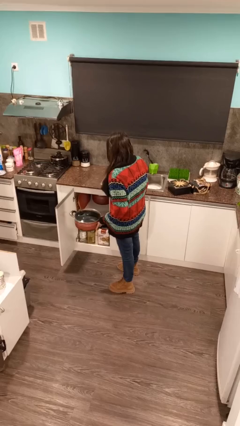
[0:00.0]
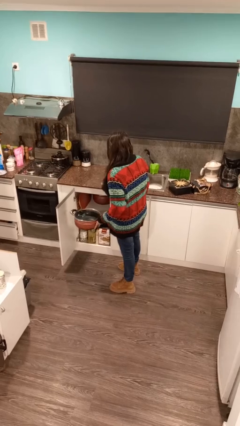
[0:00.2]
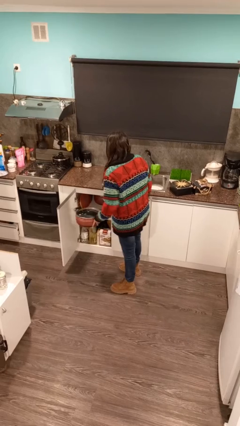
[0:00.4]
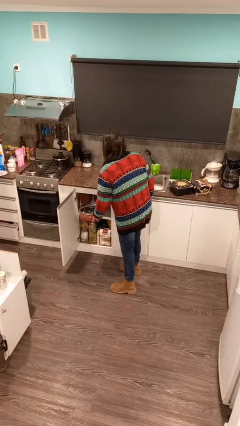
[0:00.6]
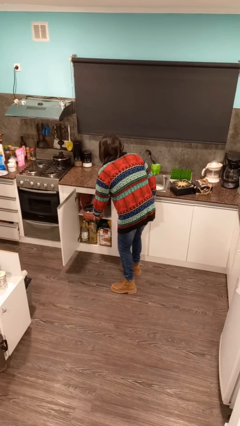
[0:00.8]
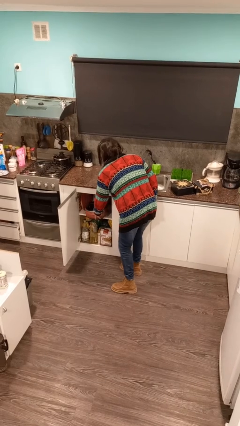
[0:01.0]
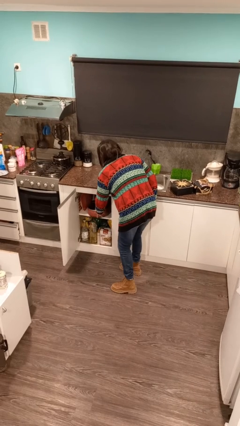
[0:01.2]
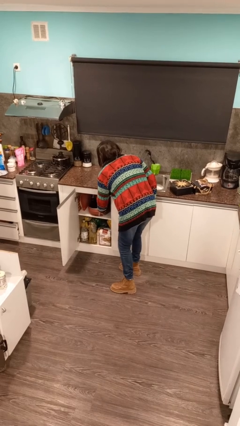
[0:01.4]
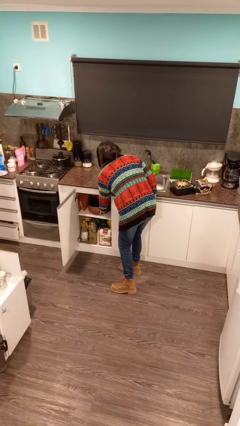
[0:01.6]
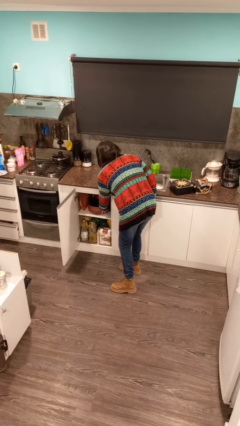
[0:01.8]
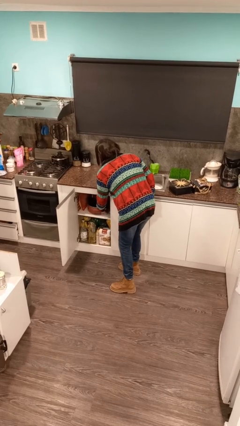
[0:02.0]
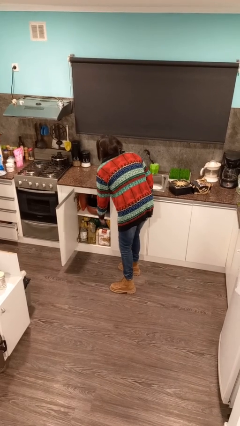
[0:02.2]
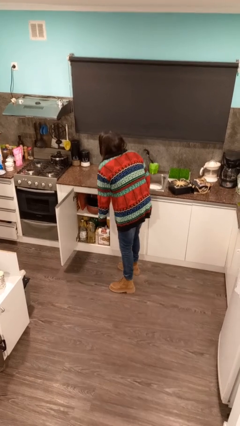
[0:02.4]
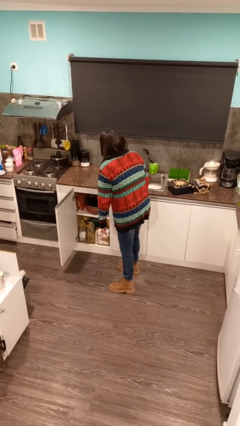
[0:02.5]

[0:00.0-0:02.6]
person puts down object into cabinet

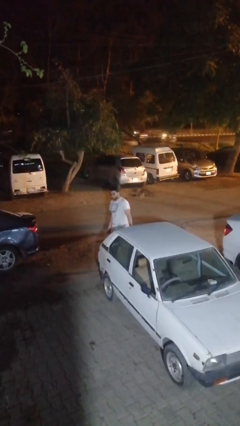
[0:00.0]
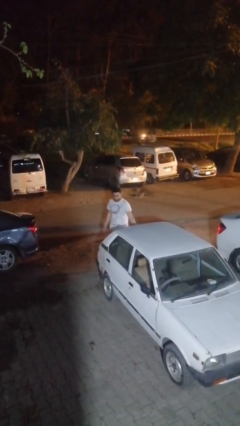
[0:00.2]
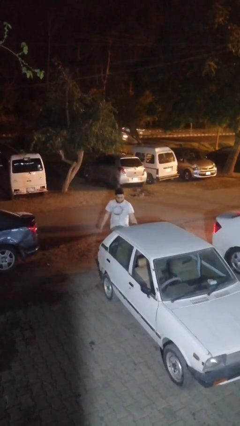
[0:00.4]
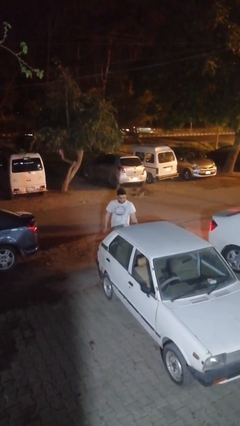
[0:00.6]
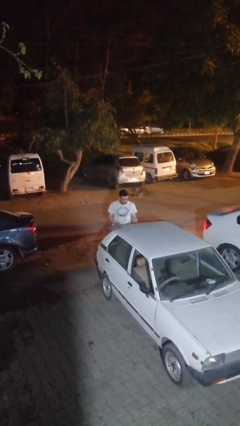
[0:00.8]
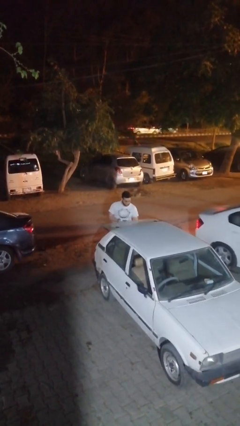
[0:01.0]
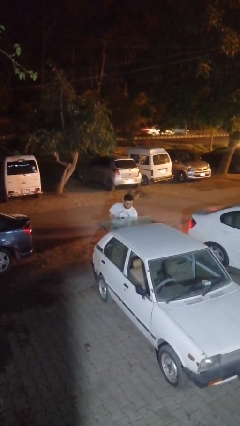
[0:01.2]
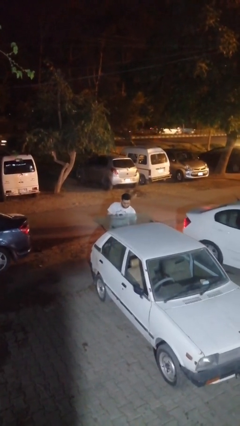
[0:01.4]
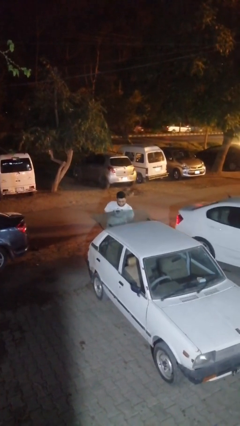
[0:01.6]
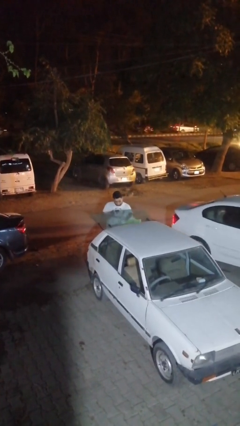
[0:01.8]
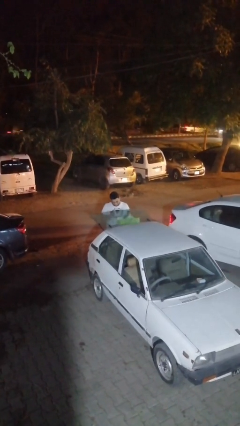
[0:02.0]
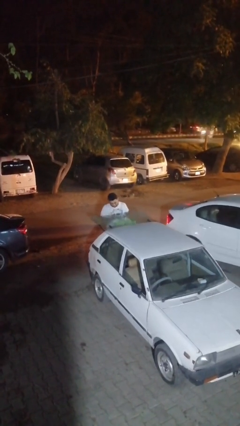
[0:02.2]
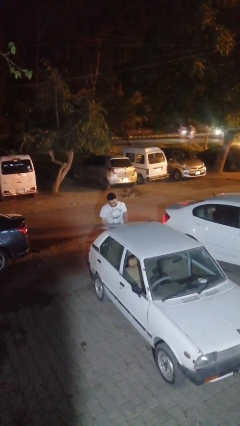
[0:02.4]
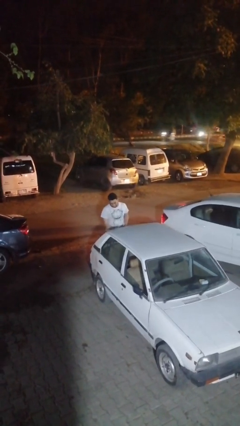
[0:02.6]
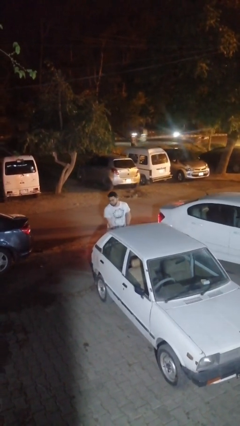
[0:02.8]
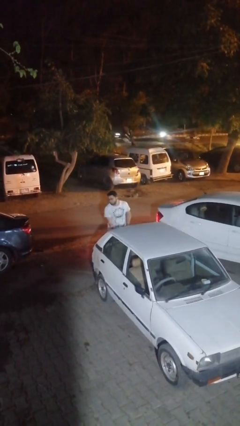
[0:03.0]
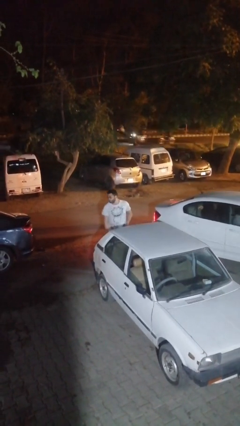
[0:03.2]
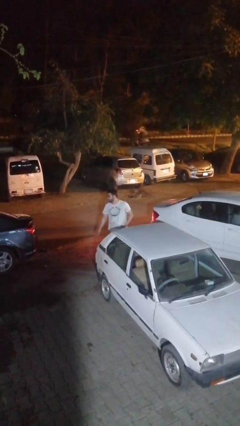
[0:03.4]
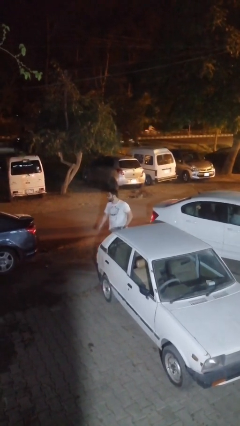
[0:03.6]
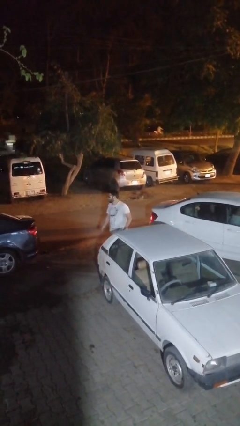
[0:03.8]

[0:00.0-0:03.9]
person unloads car

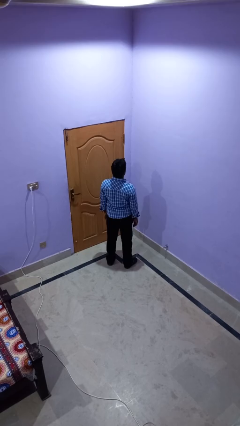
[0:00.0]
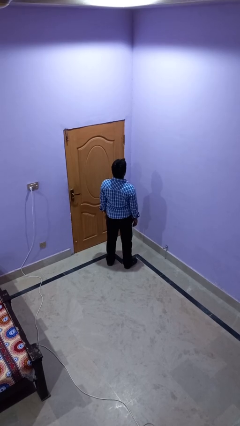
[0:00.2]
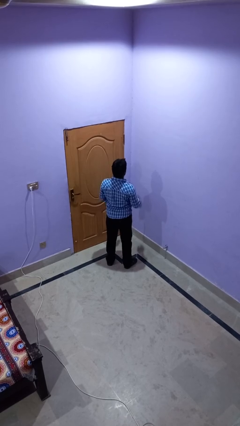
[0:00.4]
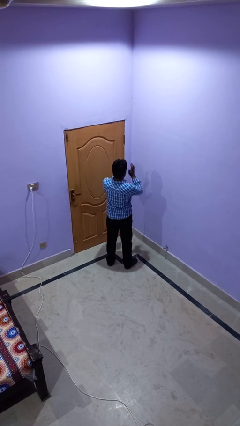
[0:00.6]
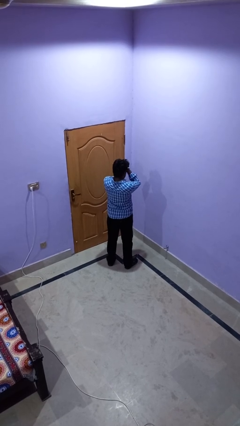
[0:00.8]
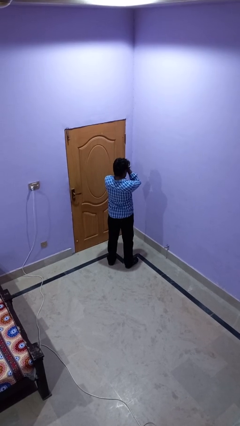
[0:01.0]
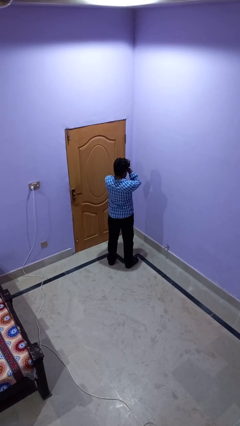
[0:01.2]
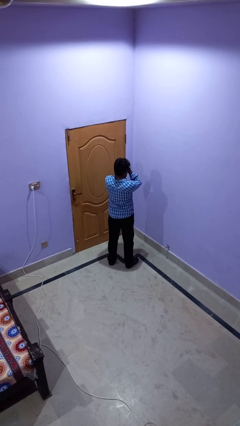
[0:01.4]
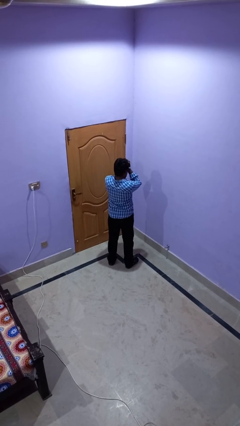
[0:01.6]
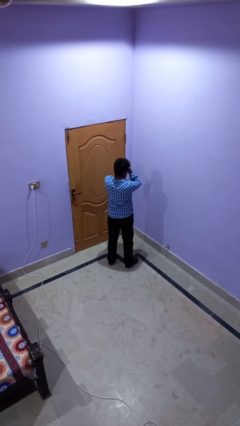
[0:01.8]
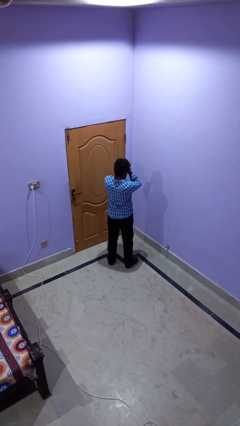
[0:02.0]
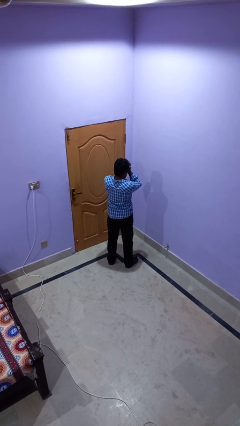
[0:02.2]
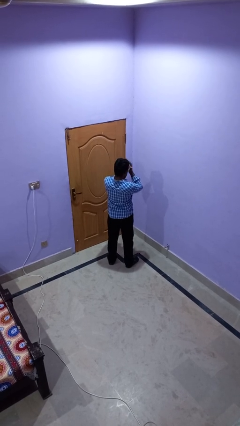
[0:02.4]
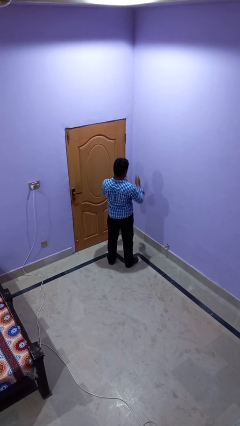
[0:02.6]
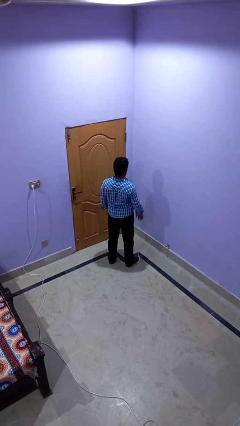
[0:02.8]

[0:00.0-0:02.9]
person rubs eyes

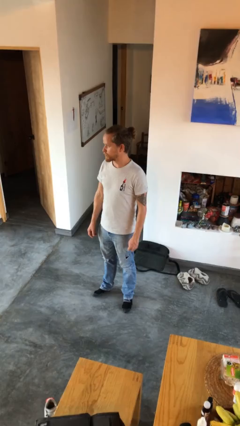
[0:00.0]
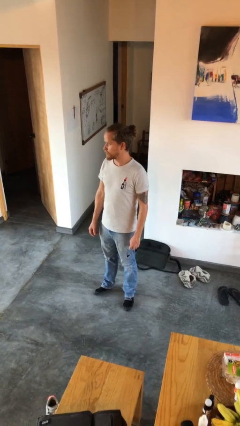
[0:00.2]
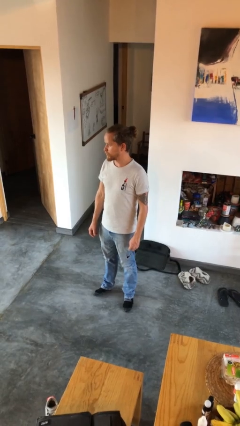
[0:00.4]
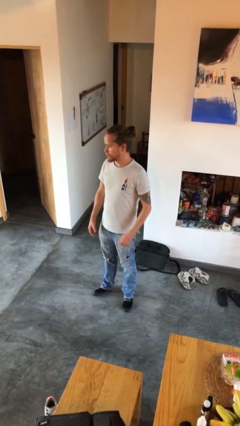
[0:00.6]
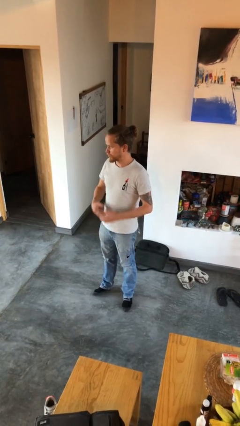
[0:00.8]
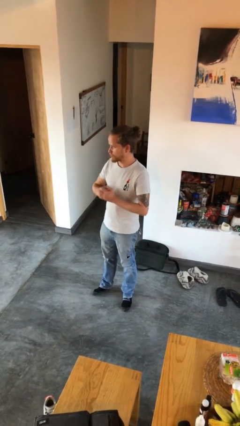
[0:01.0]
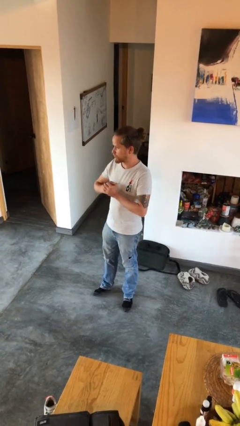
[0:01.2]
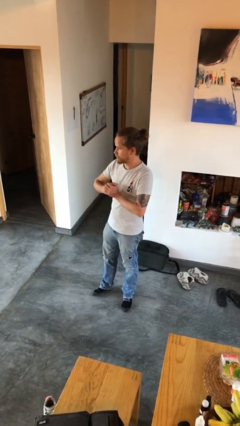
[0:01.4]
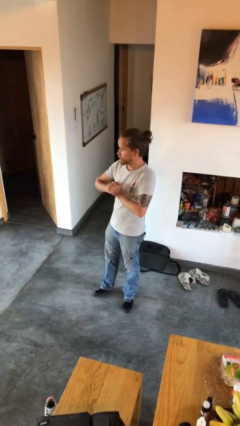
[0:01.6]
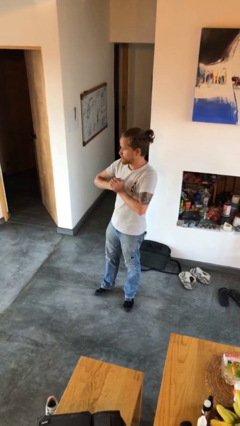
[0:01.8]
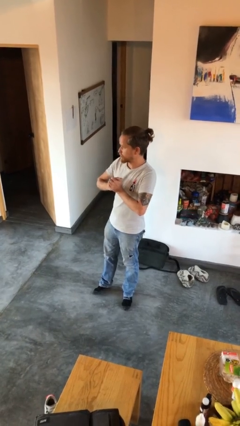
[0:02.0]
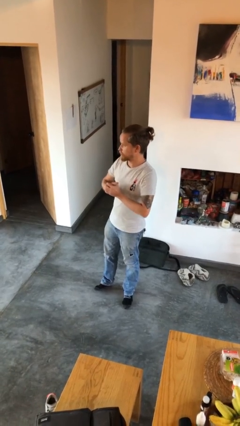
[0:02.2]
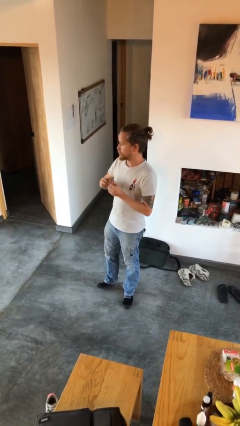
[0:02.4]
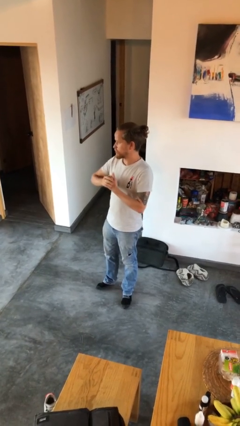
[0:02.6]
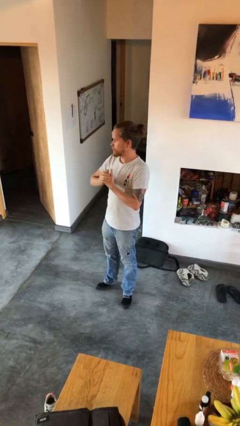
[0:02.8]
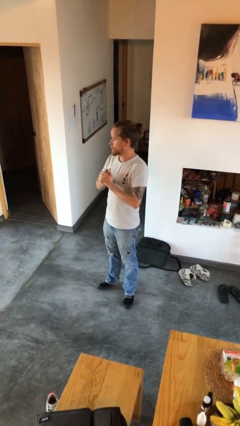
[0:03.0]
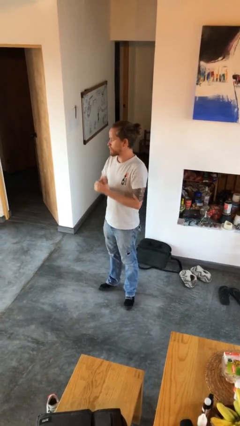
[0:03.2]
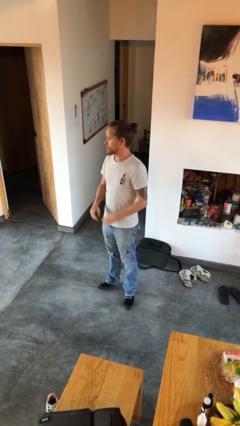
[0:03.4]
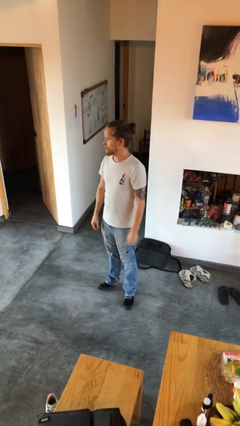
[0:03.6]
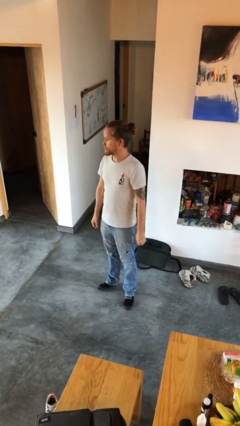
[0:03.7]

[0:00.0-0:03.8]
person cracks knuckles

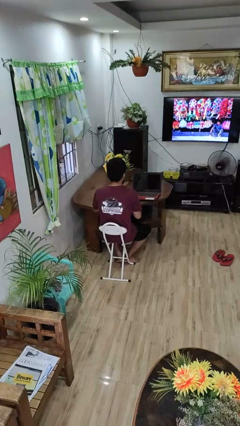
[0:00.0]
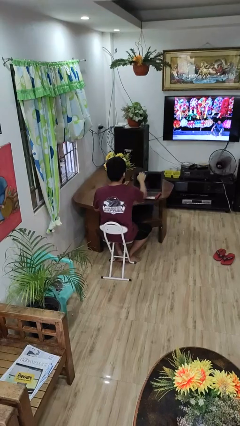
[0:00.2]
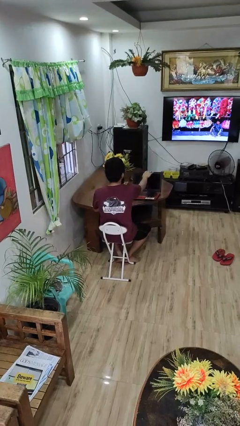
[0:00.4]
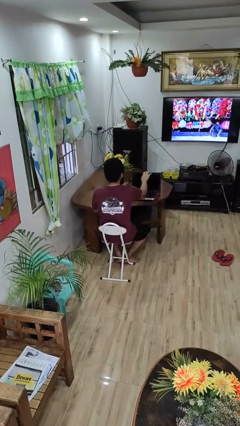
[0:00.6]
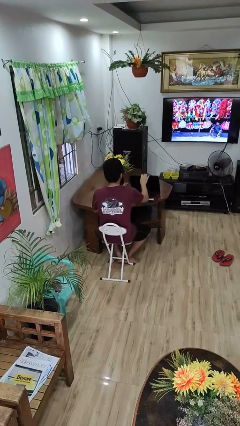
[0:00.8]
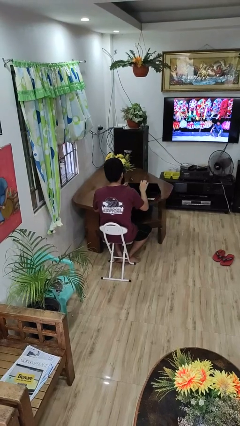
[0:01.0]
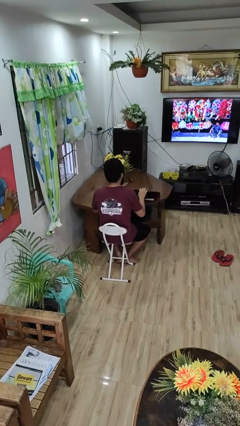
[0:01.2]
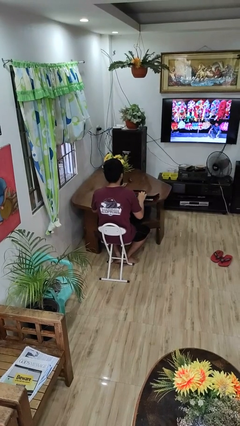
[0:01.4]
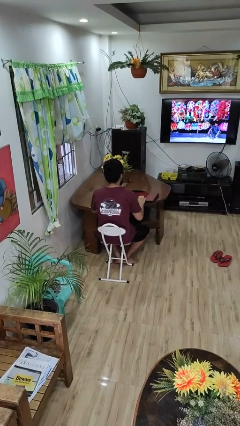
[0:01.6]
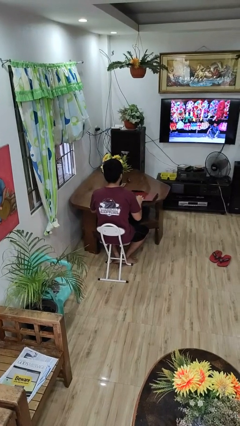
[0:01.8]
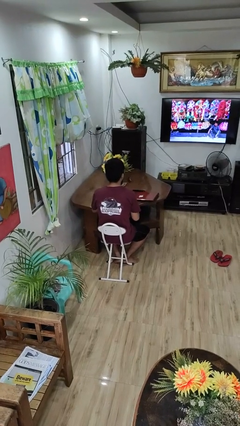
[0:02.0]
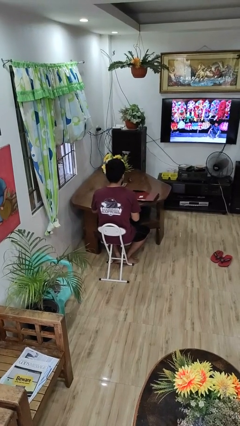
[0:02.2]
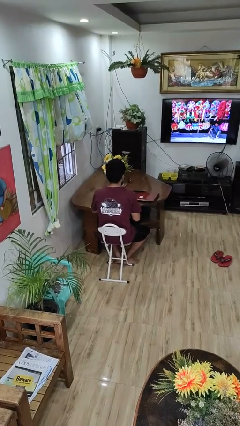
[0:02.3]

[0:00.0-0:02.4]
person closes laptop

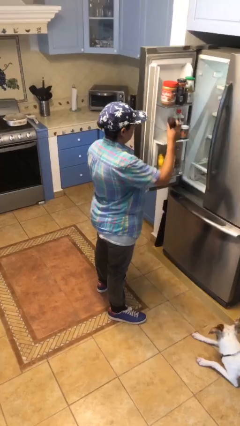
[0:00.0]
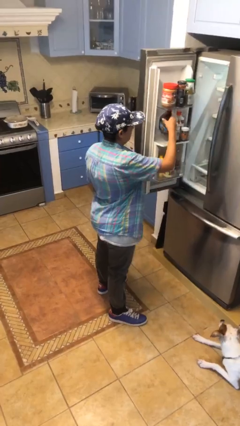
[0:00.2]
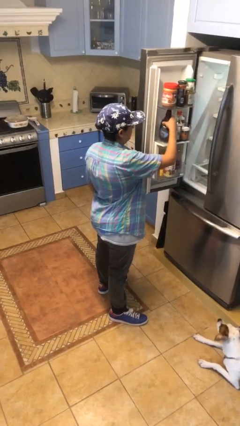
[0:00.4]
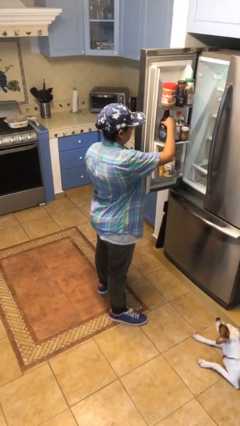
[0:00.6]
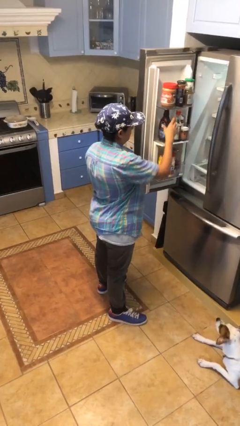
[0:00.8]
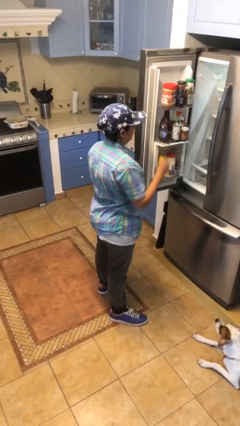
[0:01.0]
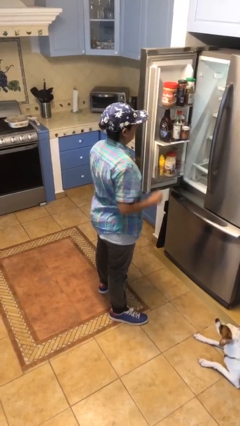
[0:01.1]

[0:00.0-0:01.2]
person puts object into refrigerator

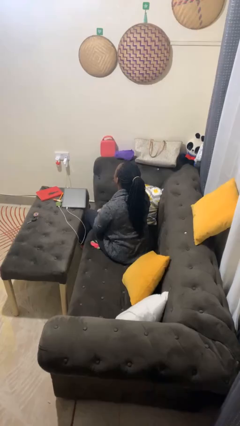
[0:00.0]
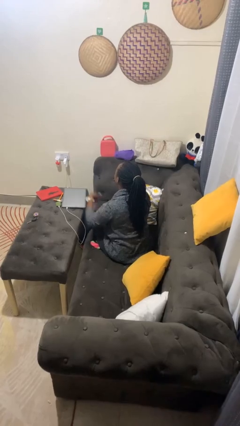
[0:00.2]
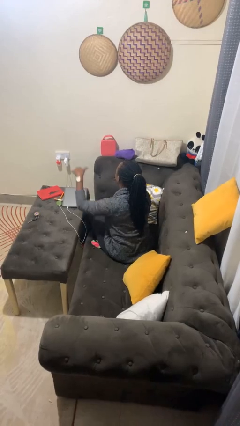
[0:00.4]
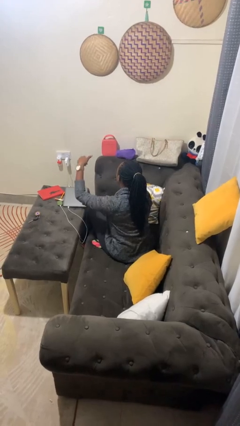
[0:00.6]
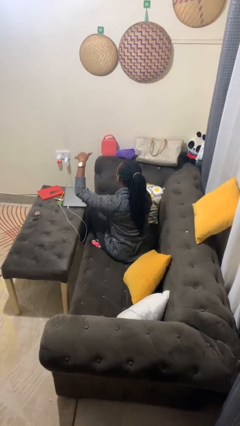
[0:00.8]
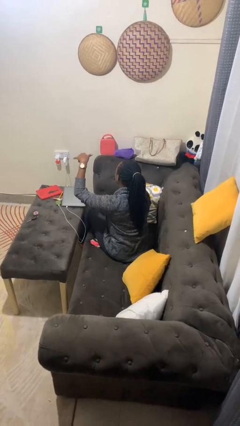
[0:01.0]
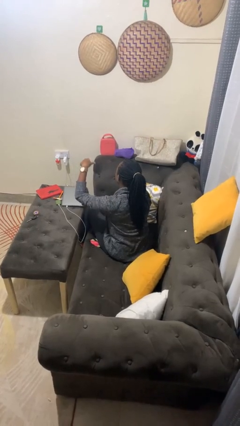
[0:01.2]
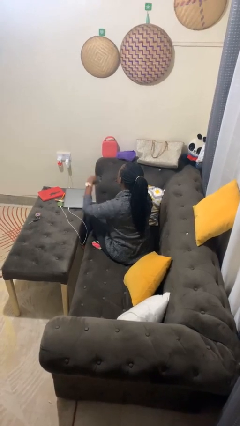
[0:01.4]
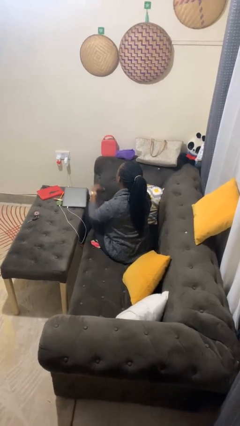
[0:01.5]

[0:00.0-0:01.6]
person gestures hang loose
